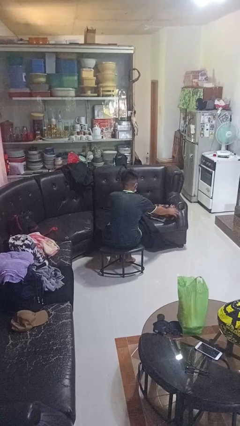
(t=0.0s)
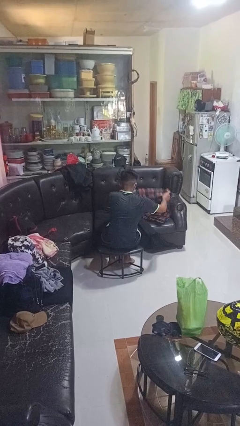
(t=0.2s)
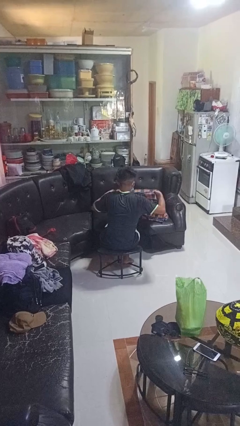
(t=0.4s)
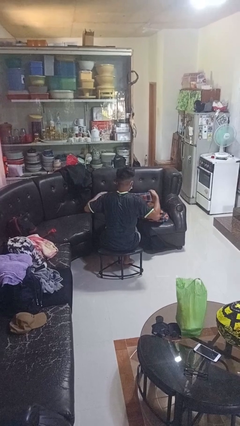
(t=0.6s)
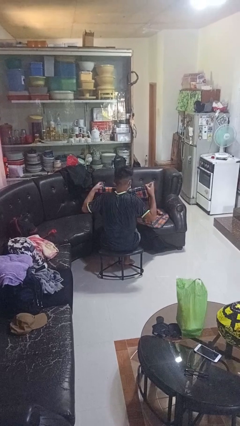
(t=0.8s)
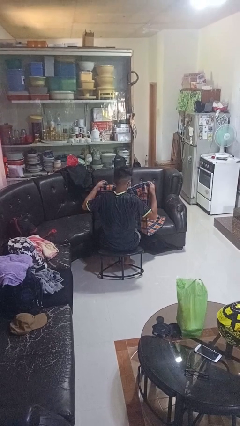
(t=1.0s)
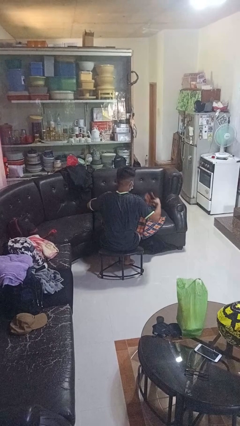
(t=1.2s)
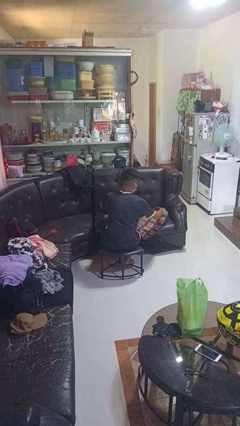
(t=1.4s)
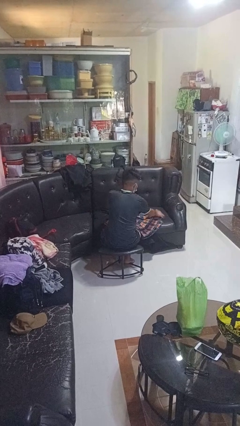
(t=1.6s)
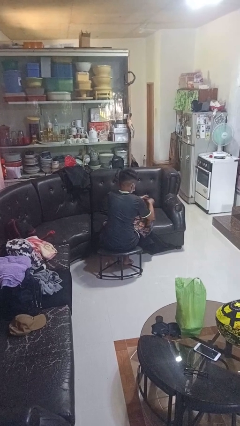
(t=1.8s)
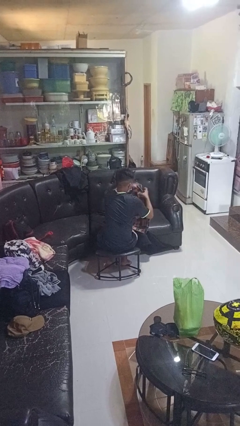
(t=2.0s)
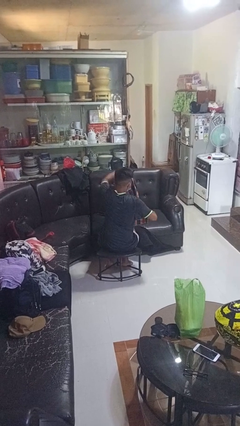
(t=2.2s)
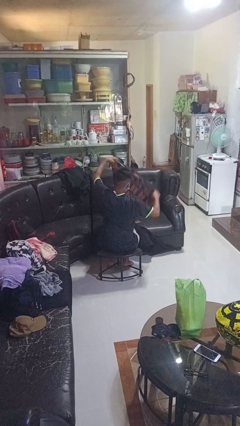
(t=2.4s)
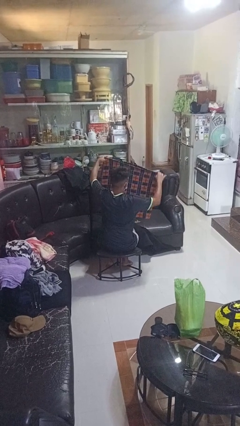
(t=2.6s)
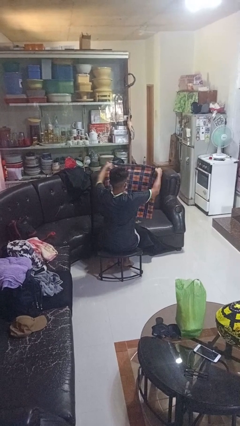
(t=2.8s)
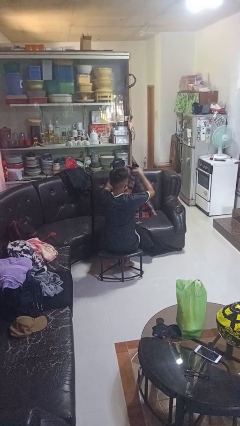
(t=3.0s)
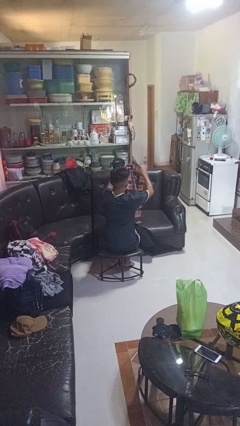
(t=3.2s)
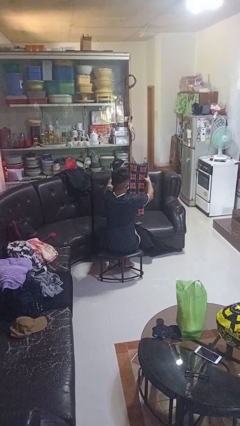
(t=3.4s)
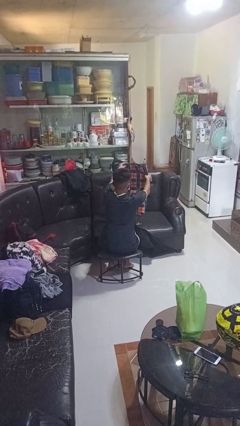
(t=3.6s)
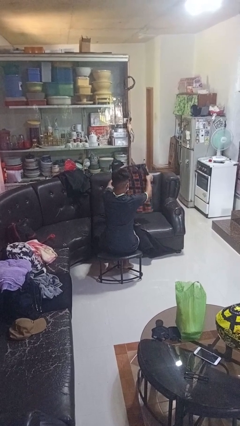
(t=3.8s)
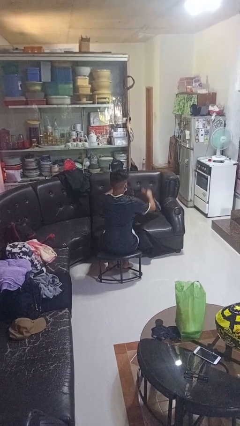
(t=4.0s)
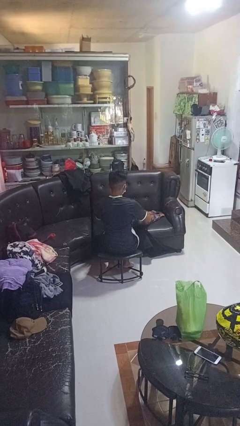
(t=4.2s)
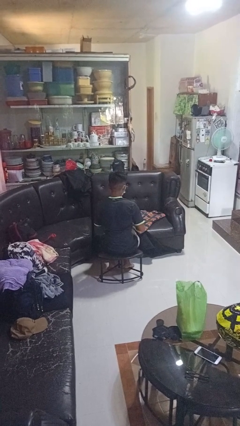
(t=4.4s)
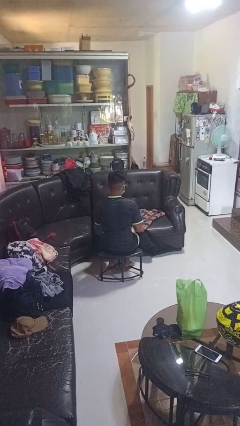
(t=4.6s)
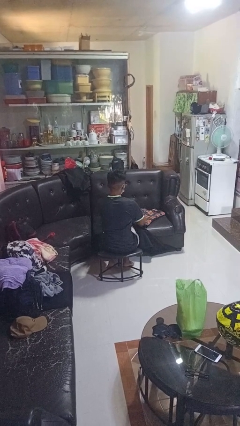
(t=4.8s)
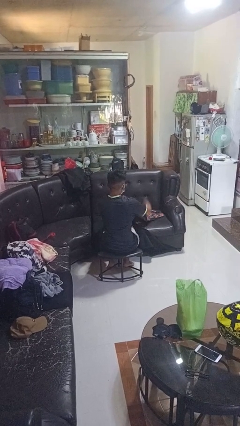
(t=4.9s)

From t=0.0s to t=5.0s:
person folds blanket

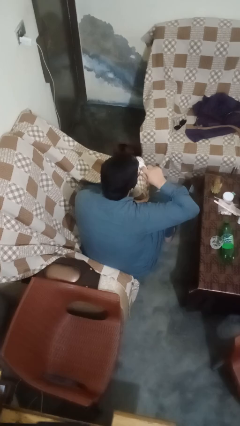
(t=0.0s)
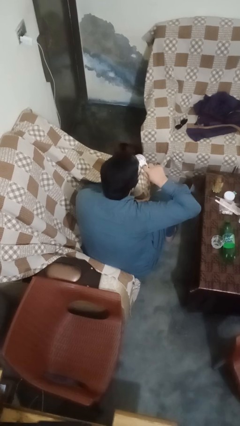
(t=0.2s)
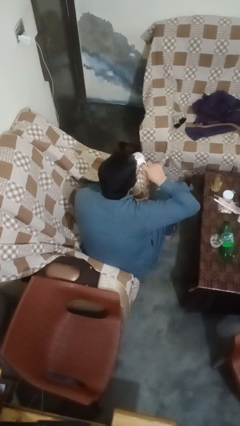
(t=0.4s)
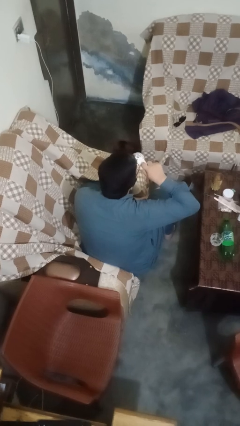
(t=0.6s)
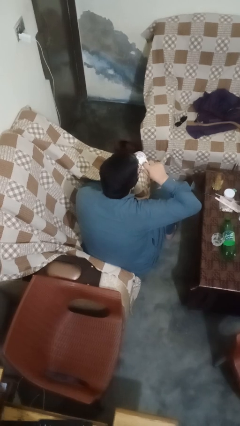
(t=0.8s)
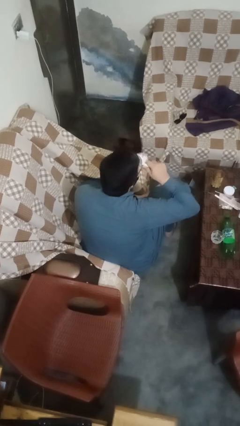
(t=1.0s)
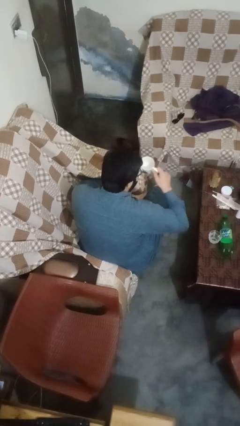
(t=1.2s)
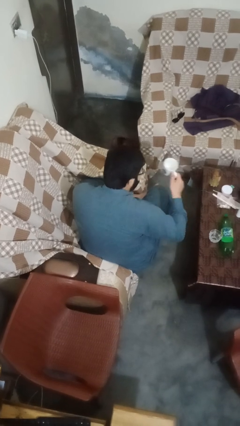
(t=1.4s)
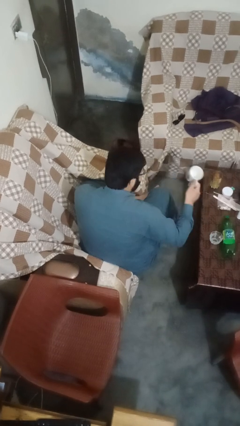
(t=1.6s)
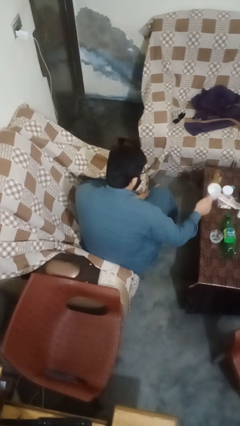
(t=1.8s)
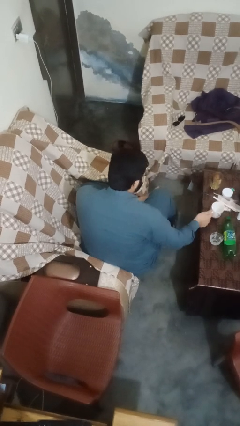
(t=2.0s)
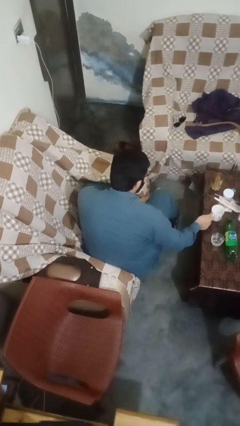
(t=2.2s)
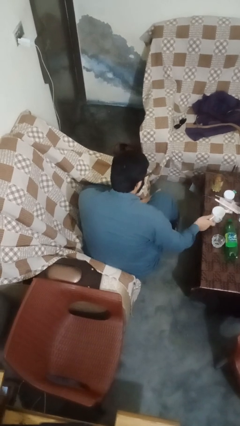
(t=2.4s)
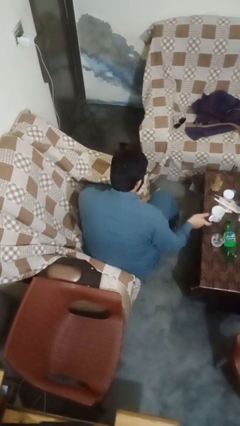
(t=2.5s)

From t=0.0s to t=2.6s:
person puts down object on table

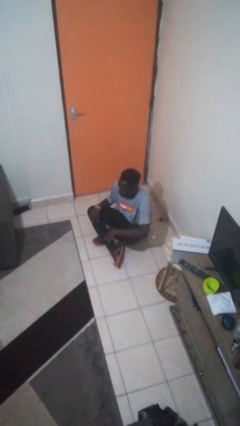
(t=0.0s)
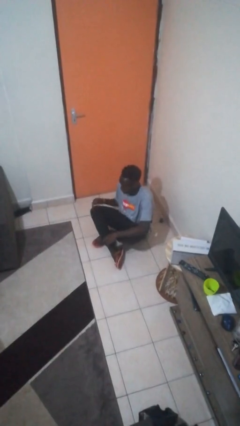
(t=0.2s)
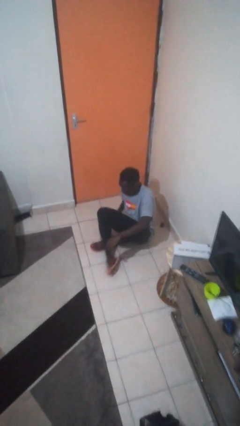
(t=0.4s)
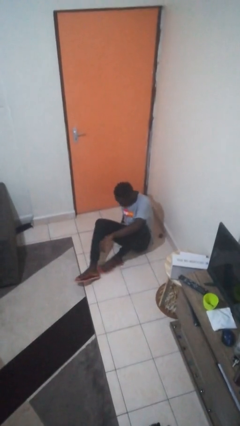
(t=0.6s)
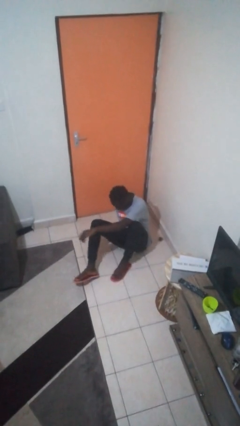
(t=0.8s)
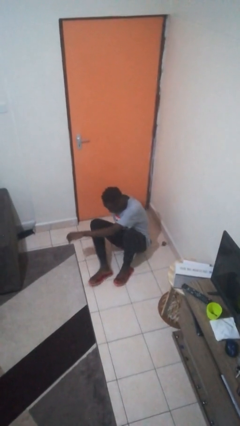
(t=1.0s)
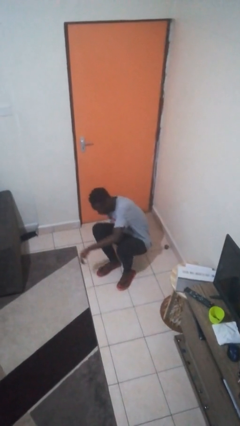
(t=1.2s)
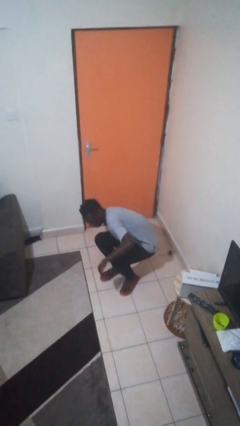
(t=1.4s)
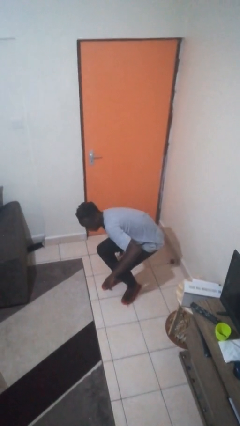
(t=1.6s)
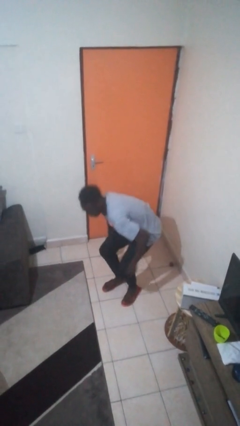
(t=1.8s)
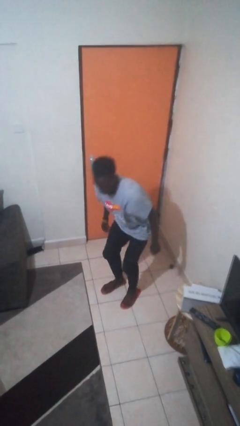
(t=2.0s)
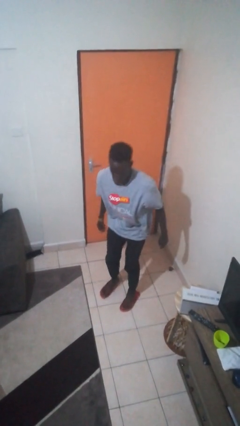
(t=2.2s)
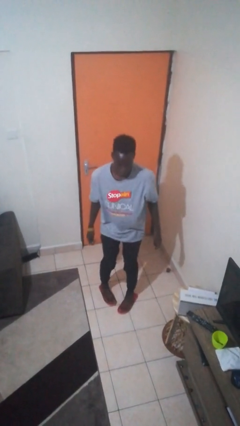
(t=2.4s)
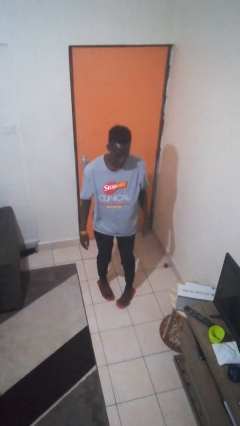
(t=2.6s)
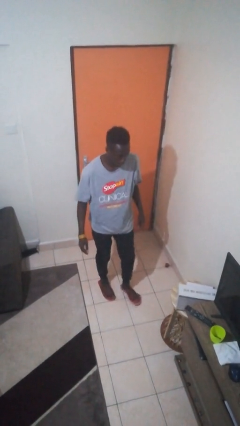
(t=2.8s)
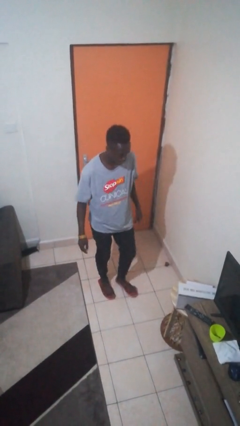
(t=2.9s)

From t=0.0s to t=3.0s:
person stands up from floor

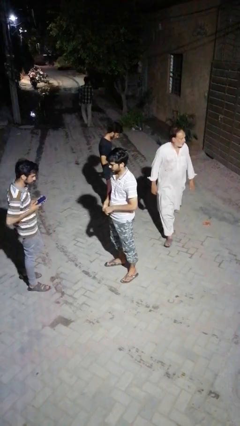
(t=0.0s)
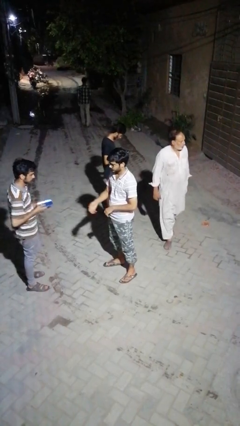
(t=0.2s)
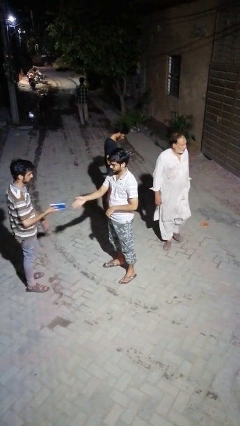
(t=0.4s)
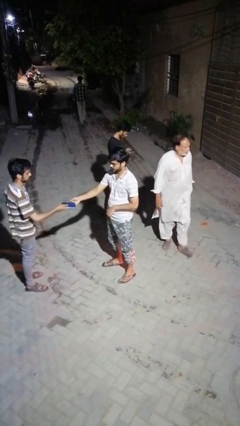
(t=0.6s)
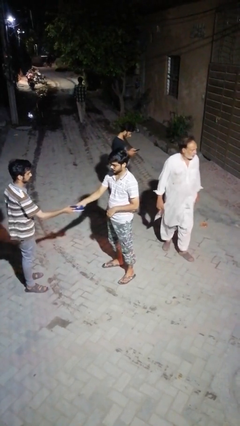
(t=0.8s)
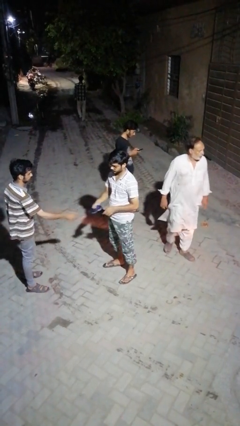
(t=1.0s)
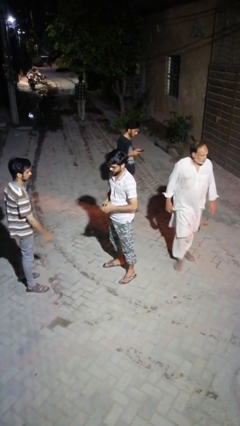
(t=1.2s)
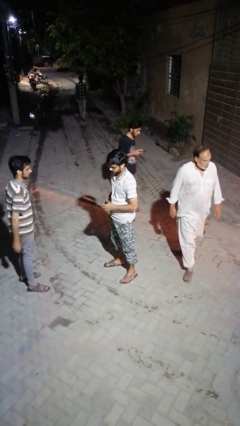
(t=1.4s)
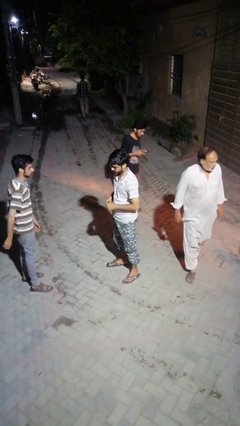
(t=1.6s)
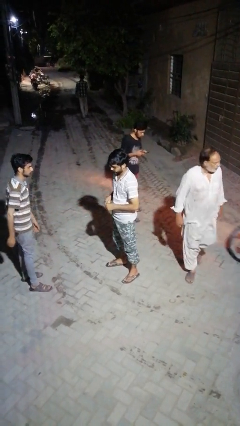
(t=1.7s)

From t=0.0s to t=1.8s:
person transfers object to person

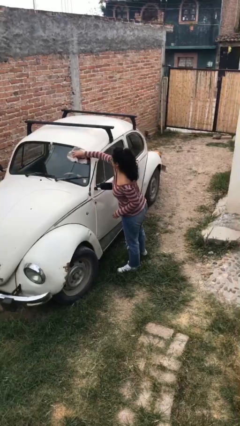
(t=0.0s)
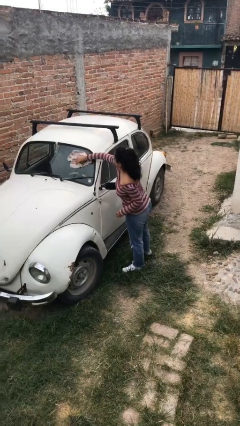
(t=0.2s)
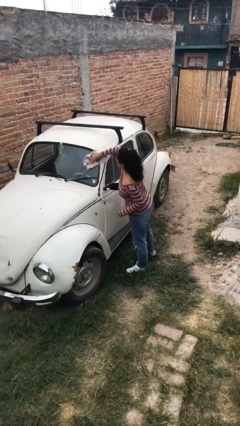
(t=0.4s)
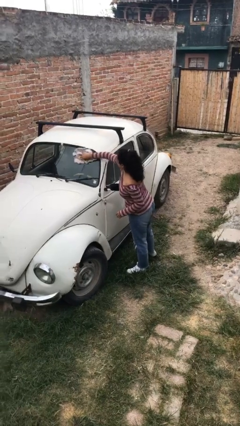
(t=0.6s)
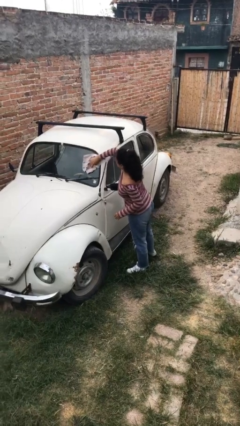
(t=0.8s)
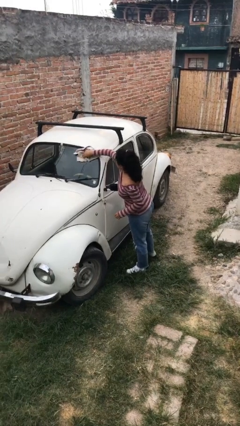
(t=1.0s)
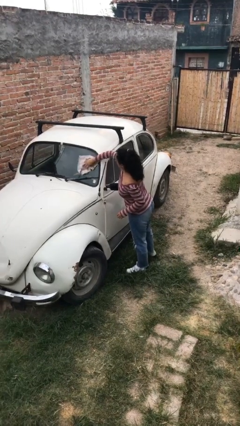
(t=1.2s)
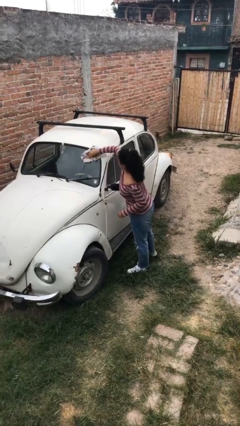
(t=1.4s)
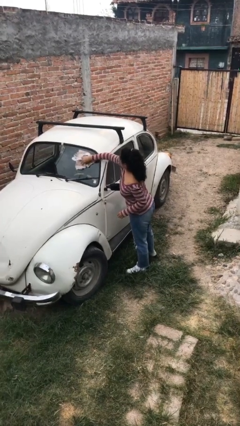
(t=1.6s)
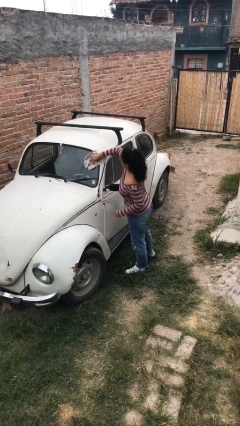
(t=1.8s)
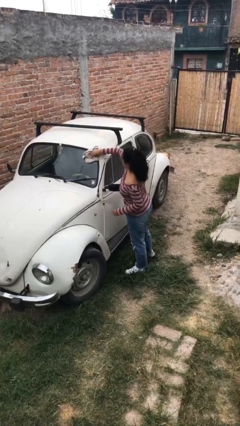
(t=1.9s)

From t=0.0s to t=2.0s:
person polishes car with rag

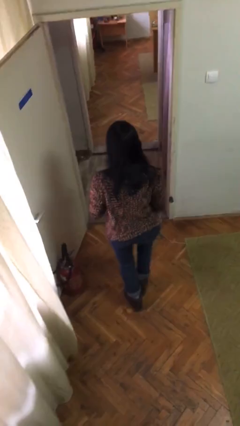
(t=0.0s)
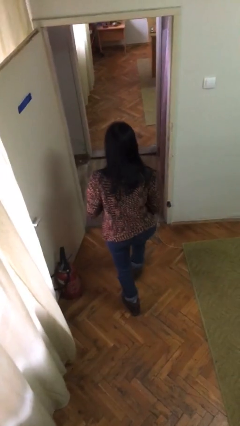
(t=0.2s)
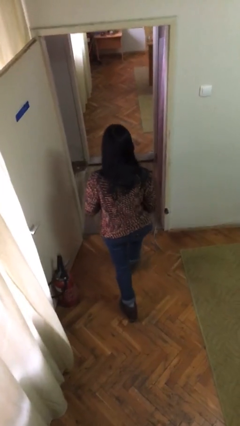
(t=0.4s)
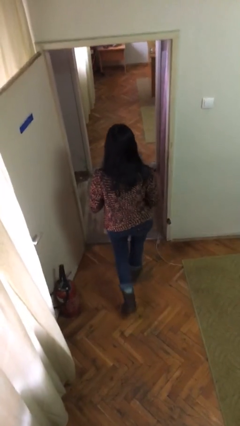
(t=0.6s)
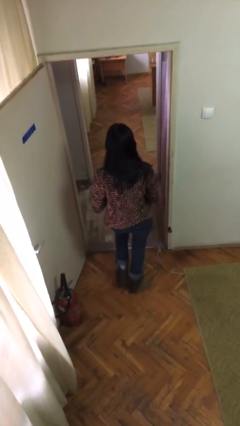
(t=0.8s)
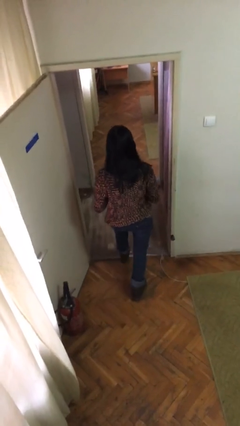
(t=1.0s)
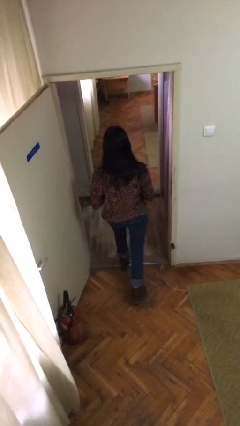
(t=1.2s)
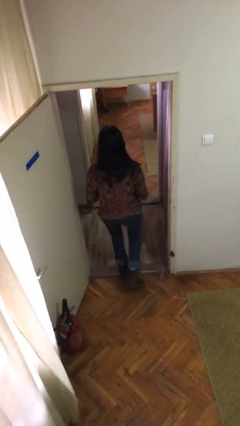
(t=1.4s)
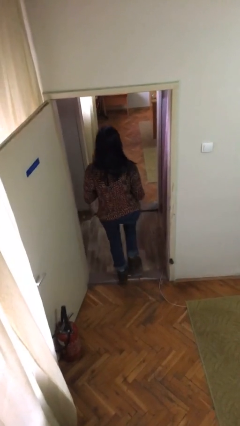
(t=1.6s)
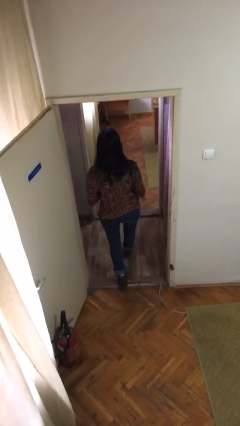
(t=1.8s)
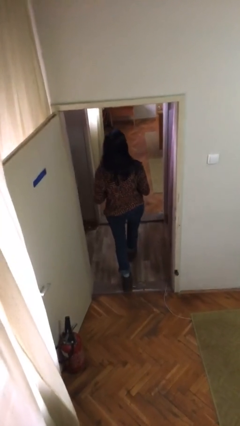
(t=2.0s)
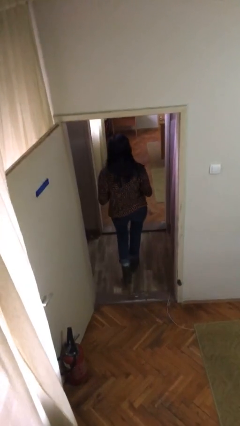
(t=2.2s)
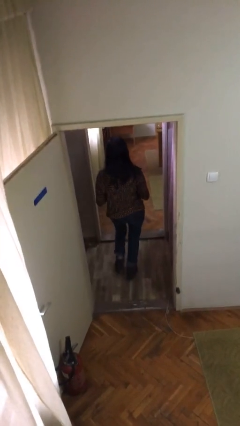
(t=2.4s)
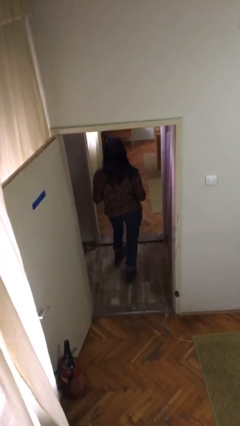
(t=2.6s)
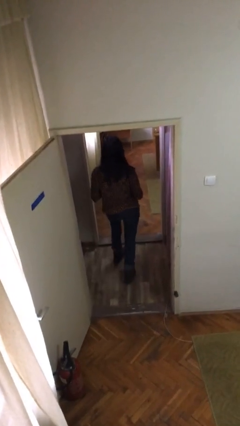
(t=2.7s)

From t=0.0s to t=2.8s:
person exits scene through structure
